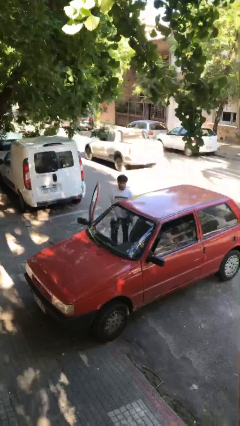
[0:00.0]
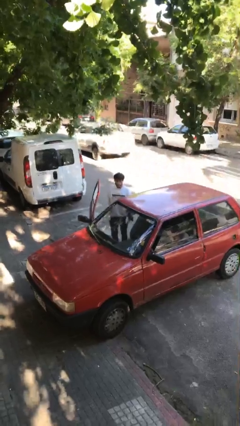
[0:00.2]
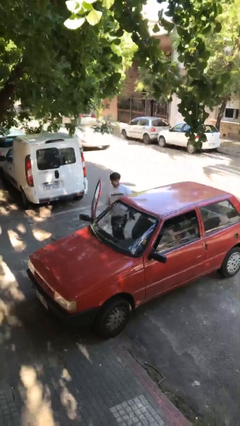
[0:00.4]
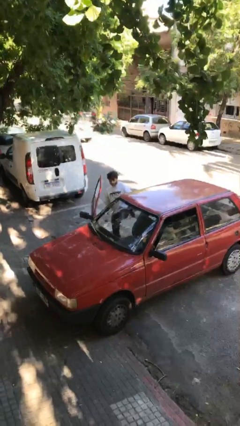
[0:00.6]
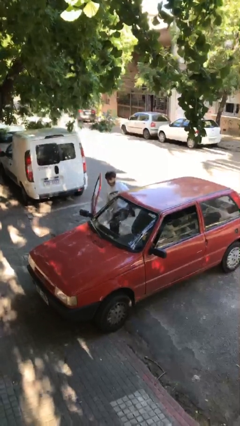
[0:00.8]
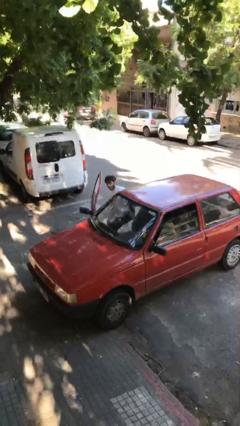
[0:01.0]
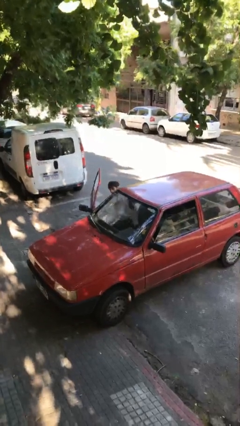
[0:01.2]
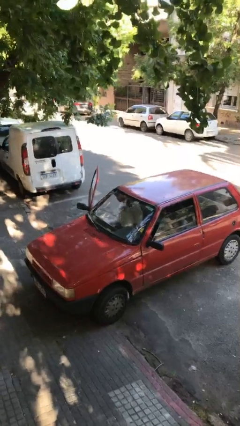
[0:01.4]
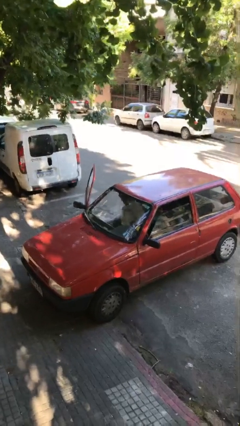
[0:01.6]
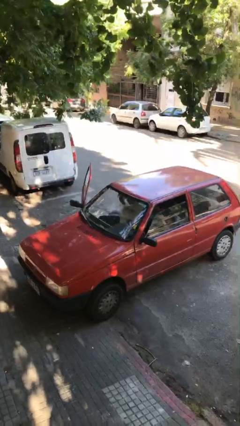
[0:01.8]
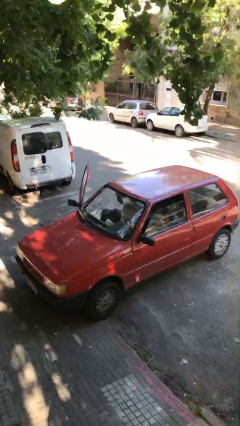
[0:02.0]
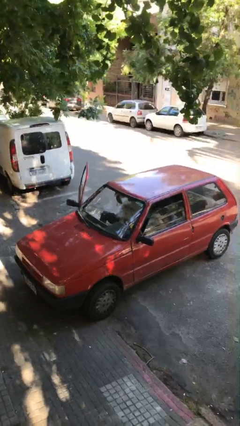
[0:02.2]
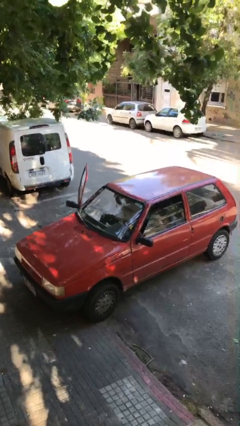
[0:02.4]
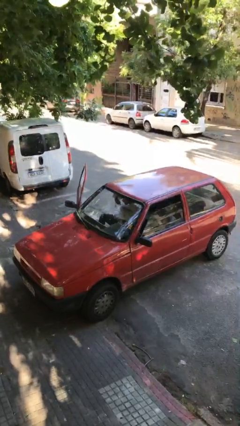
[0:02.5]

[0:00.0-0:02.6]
person enters car

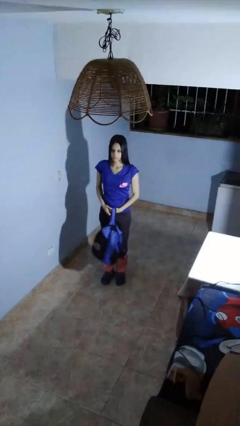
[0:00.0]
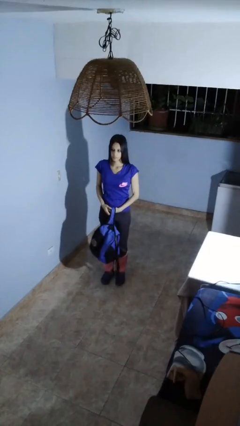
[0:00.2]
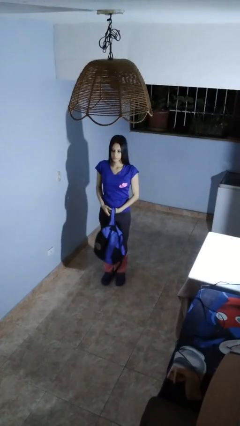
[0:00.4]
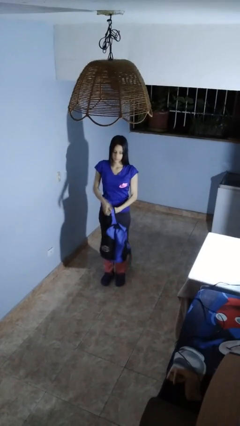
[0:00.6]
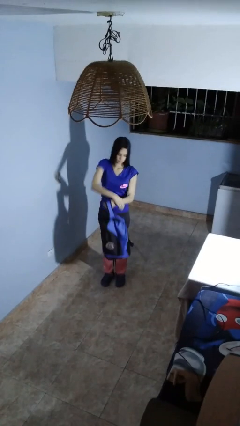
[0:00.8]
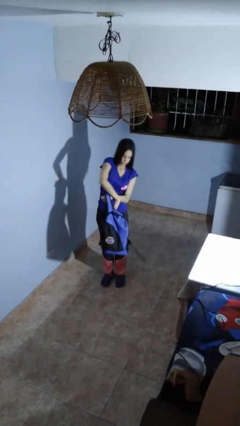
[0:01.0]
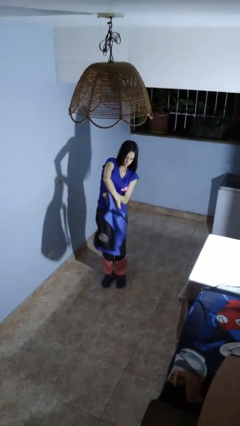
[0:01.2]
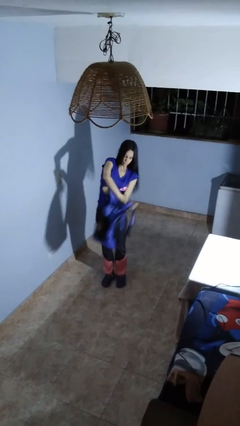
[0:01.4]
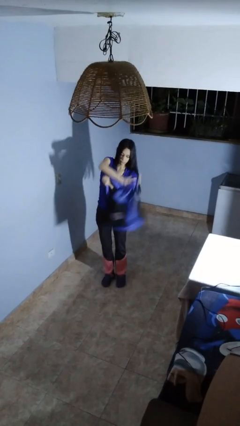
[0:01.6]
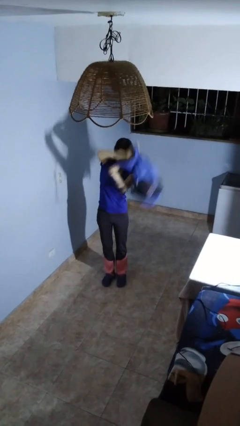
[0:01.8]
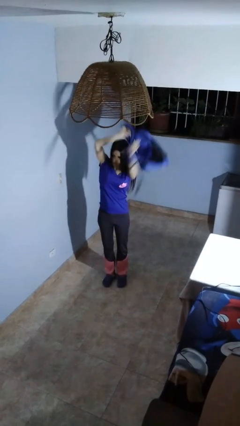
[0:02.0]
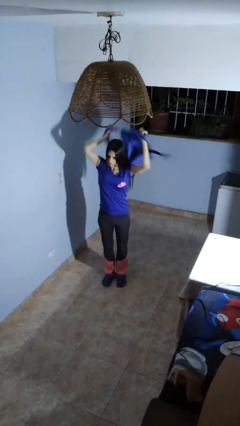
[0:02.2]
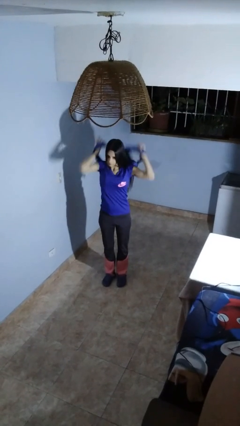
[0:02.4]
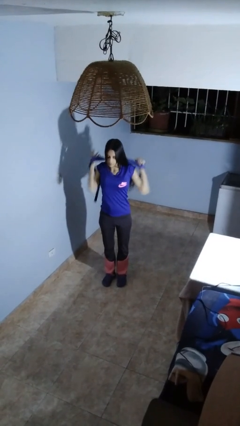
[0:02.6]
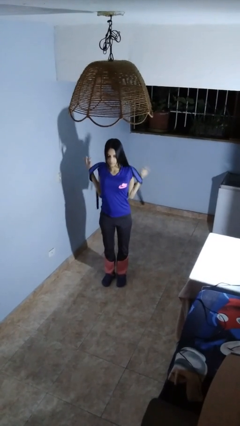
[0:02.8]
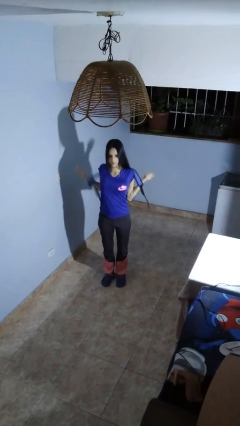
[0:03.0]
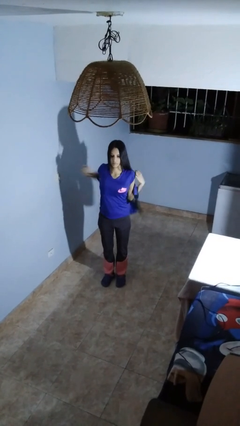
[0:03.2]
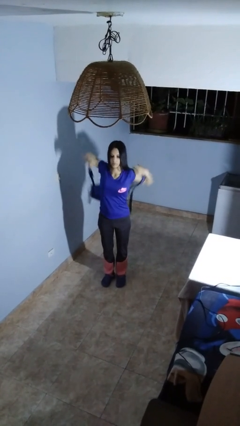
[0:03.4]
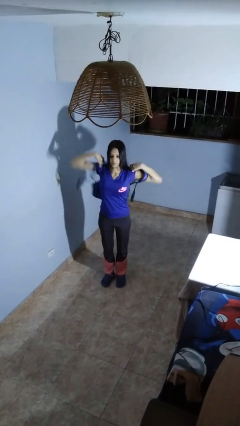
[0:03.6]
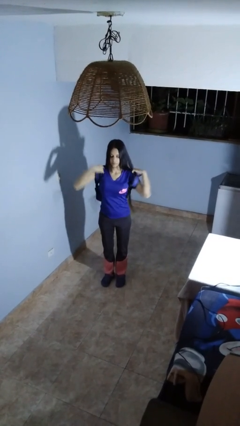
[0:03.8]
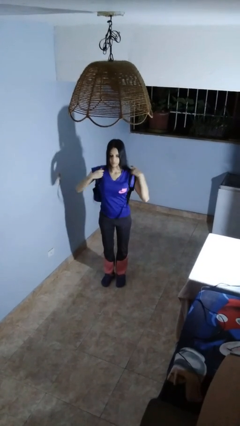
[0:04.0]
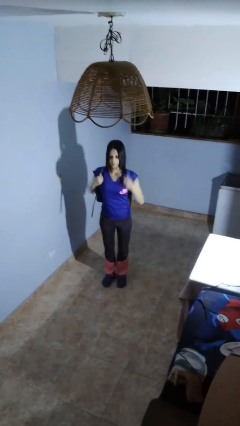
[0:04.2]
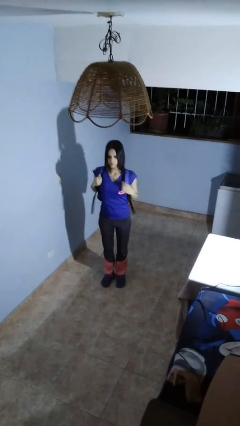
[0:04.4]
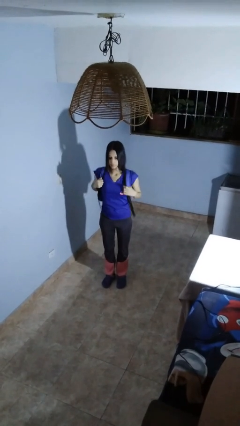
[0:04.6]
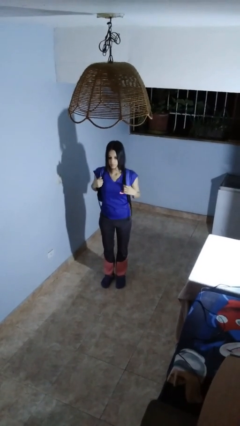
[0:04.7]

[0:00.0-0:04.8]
person puts on backpack

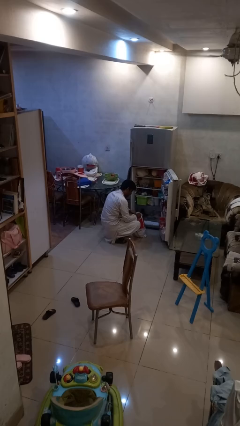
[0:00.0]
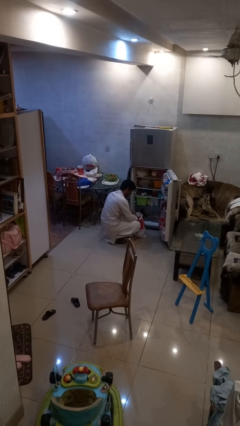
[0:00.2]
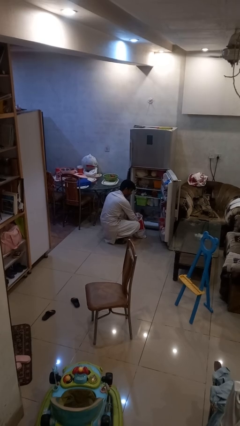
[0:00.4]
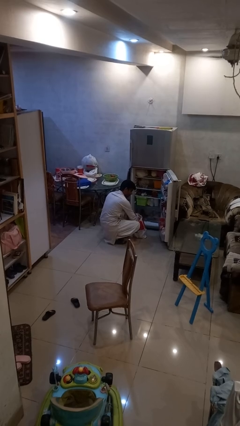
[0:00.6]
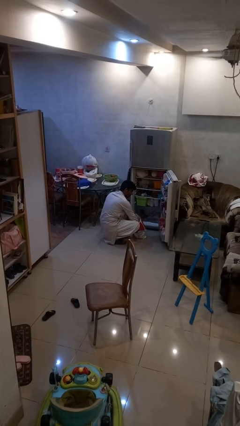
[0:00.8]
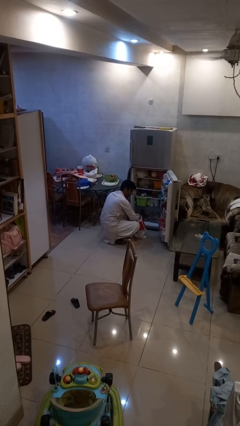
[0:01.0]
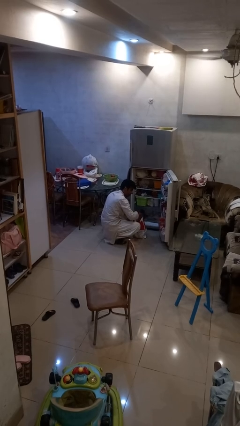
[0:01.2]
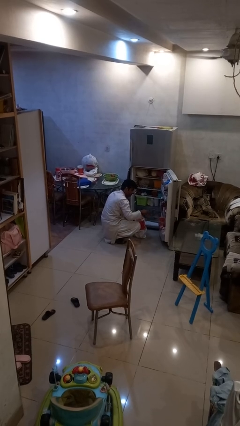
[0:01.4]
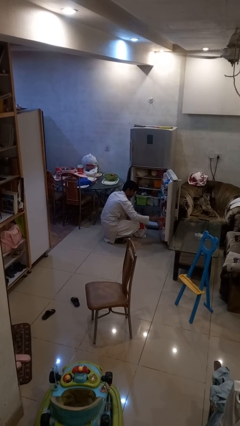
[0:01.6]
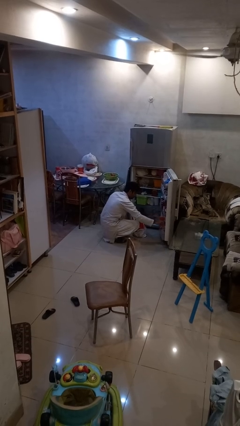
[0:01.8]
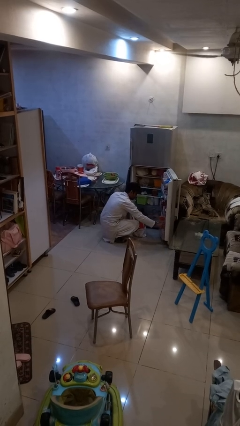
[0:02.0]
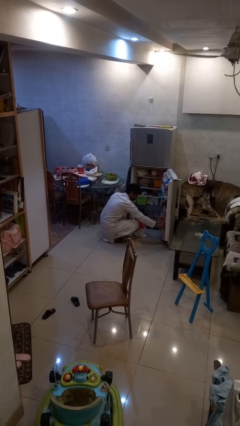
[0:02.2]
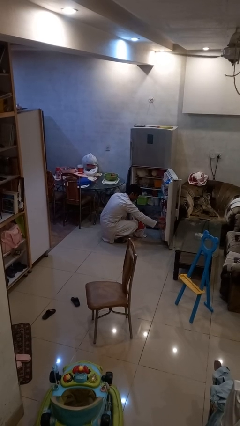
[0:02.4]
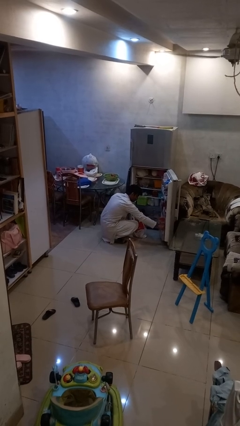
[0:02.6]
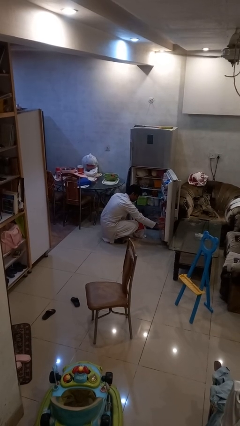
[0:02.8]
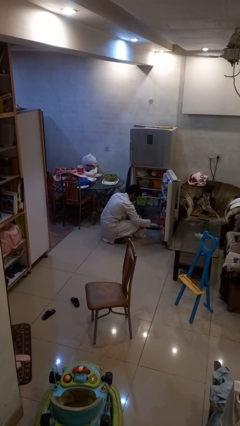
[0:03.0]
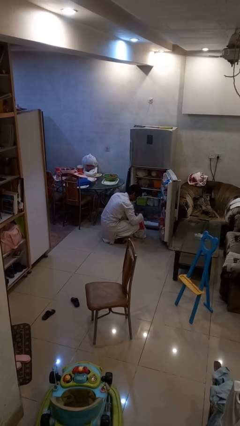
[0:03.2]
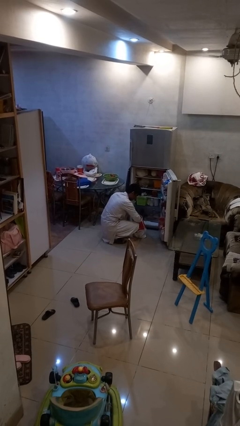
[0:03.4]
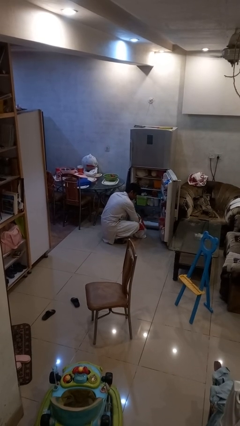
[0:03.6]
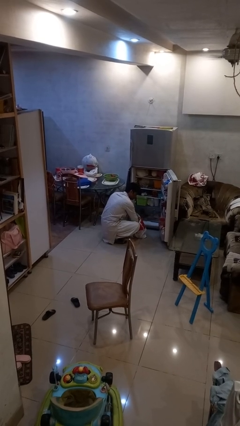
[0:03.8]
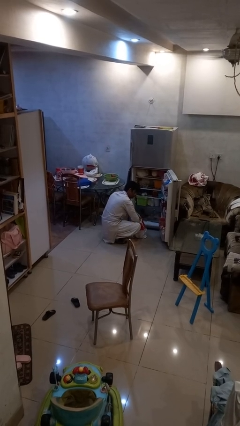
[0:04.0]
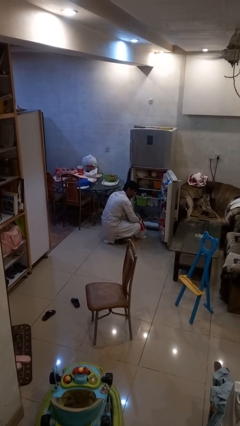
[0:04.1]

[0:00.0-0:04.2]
person loads groceries into refrigerator

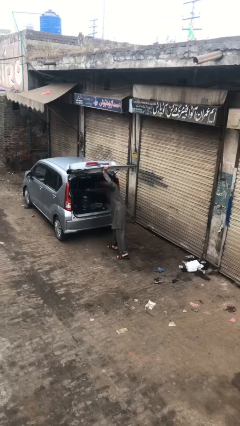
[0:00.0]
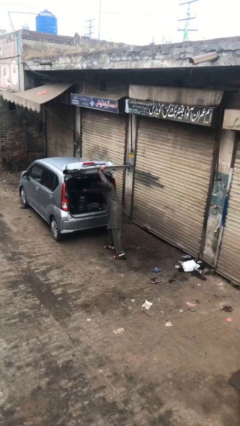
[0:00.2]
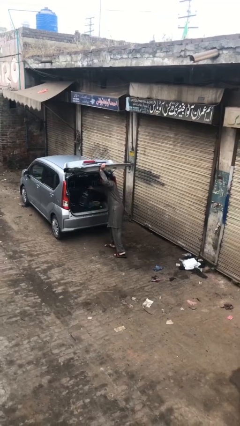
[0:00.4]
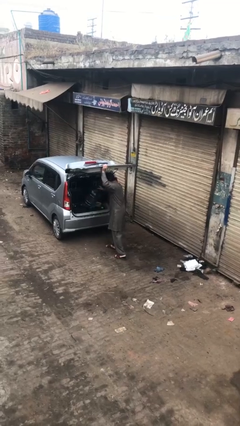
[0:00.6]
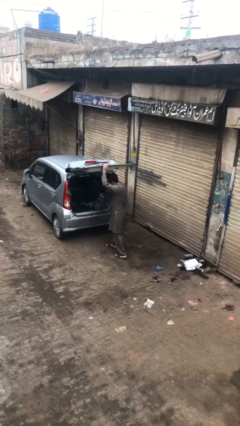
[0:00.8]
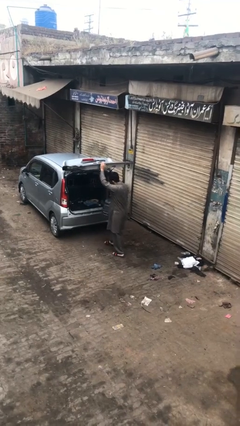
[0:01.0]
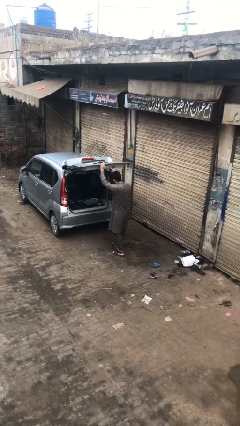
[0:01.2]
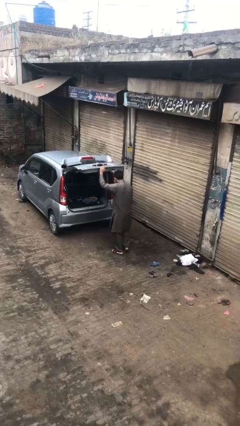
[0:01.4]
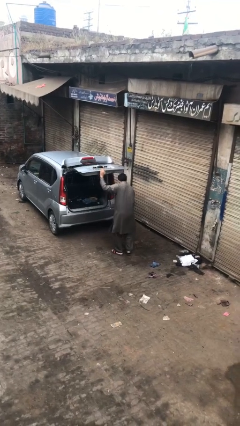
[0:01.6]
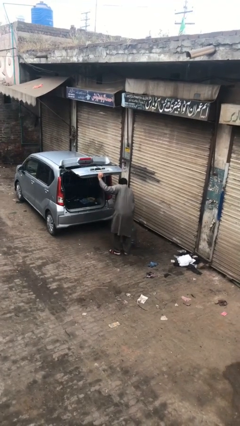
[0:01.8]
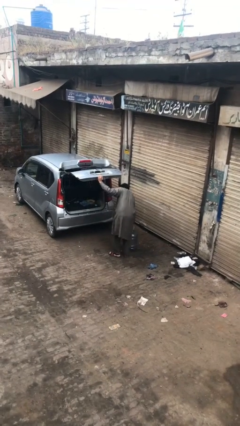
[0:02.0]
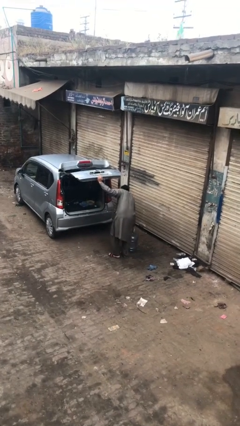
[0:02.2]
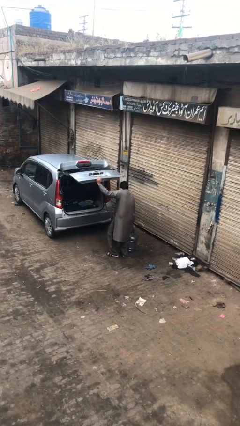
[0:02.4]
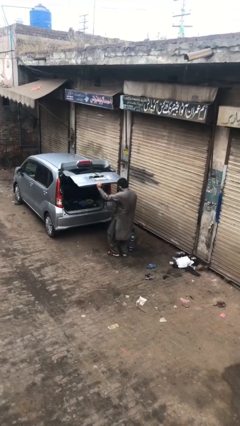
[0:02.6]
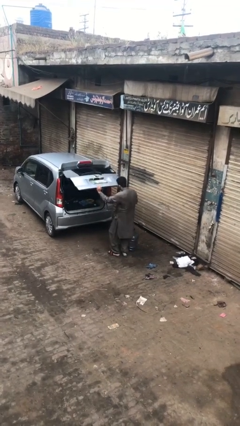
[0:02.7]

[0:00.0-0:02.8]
person unloads car

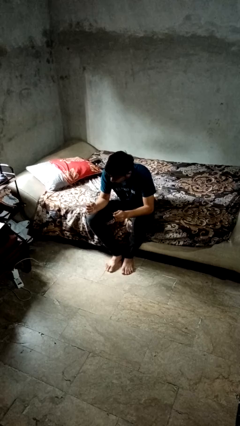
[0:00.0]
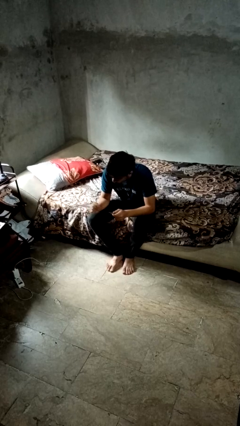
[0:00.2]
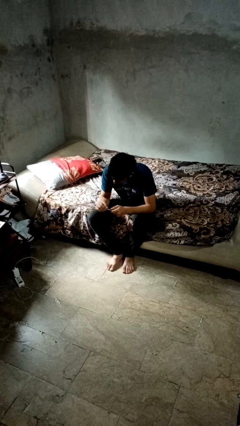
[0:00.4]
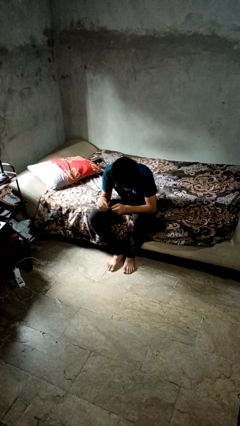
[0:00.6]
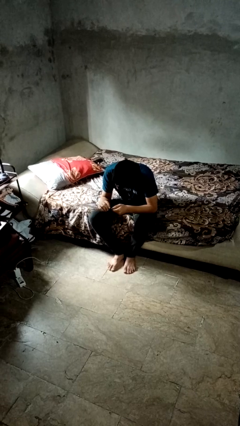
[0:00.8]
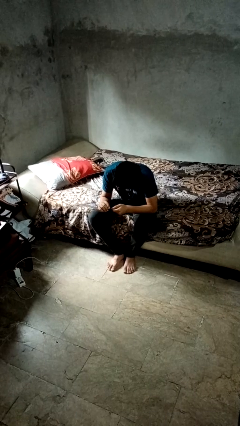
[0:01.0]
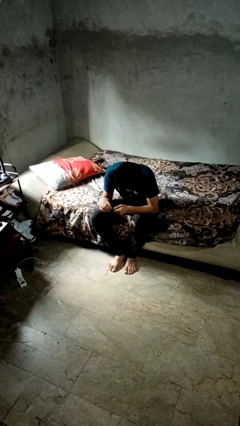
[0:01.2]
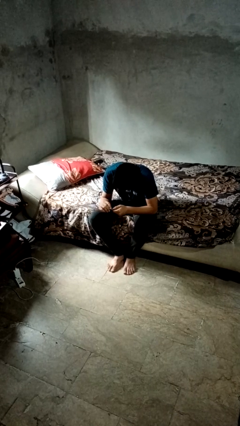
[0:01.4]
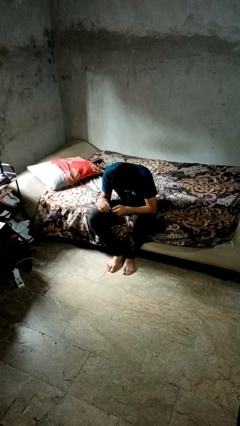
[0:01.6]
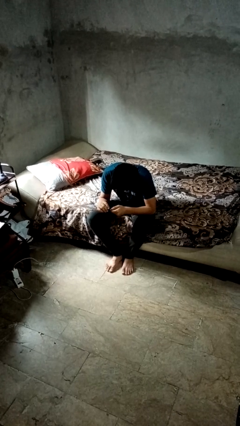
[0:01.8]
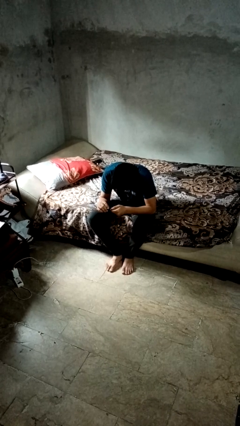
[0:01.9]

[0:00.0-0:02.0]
person files fingernails

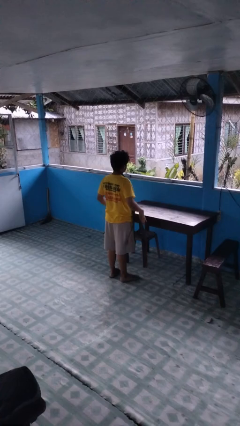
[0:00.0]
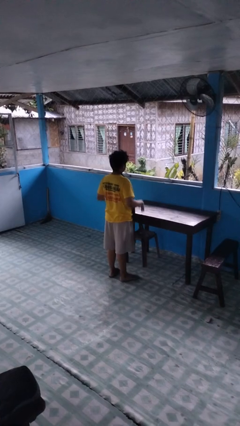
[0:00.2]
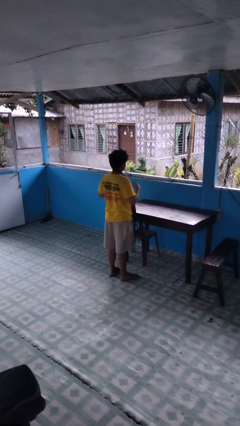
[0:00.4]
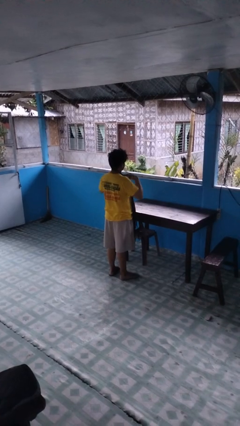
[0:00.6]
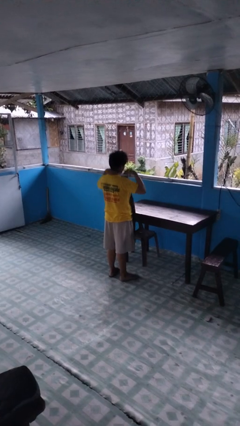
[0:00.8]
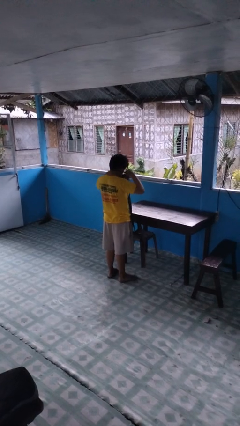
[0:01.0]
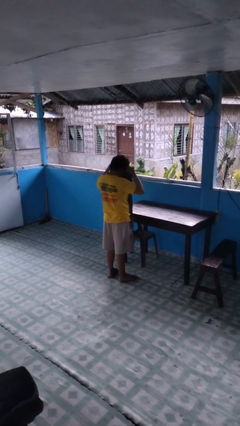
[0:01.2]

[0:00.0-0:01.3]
person takes off apron
